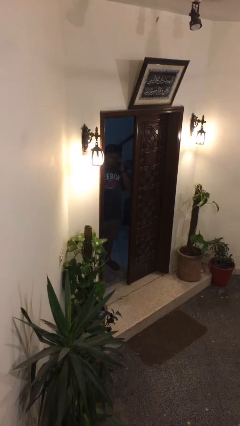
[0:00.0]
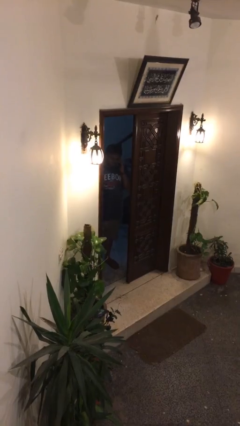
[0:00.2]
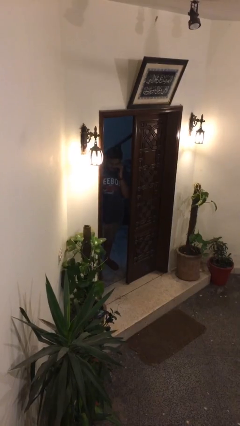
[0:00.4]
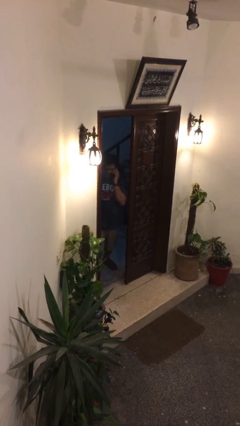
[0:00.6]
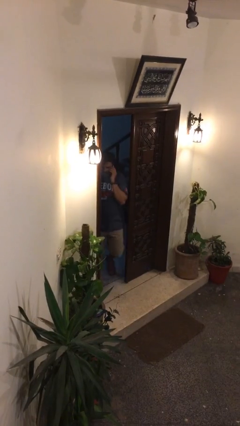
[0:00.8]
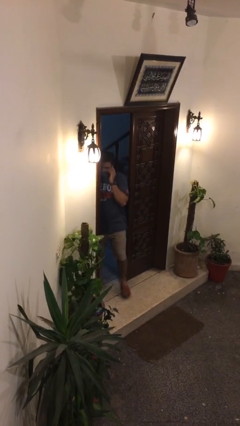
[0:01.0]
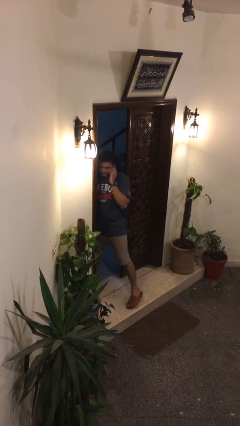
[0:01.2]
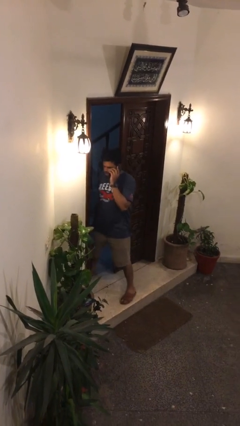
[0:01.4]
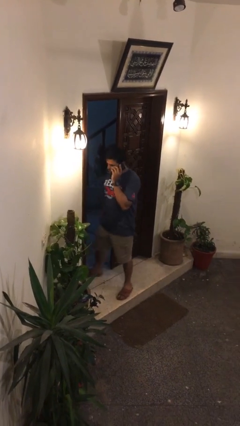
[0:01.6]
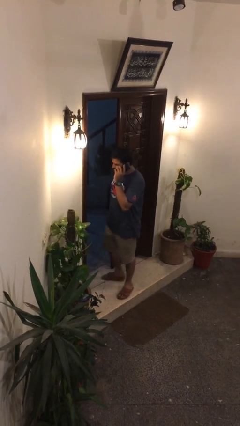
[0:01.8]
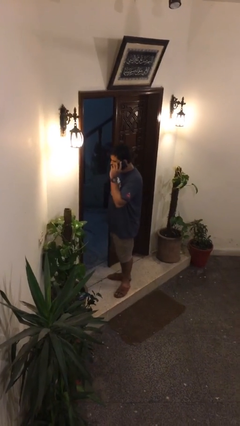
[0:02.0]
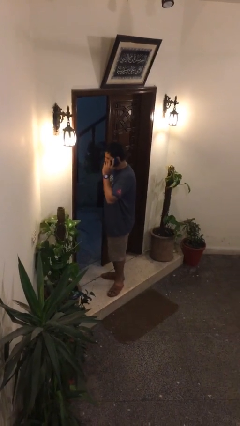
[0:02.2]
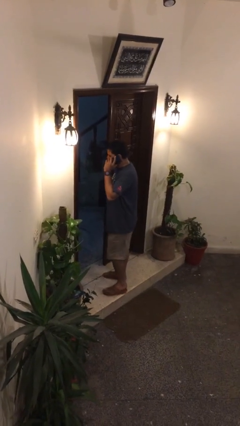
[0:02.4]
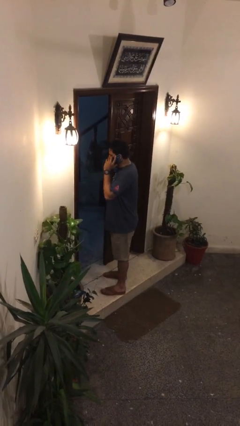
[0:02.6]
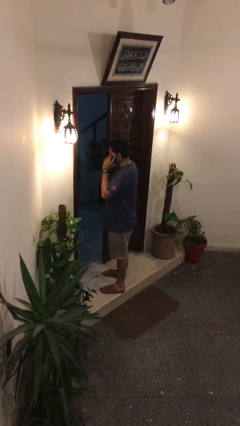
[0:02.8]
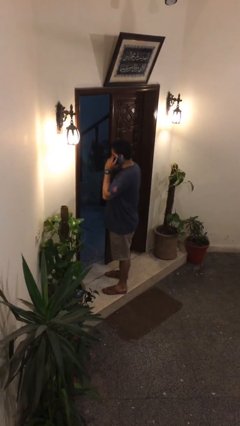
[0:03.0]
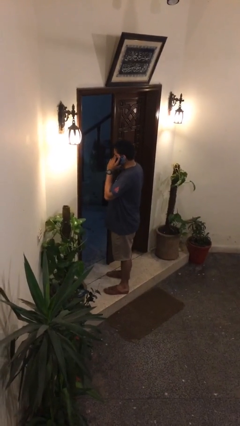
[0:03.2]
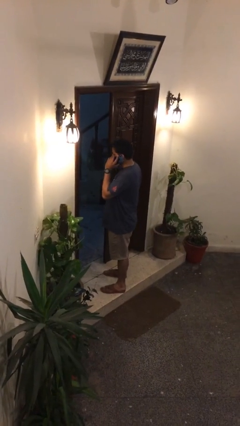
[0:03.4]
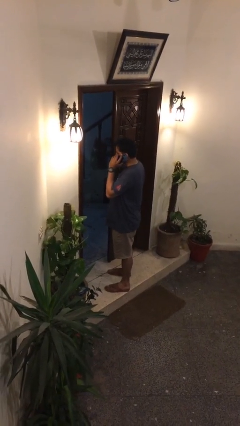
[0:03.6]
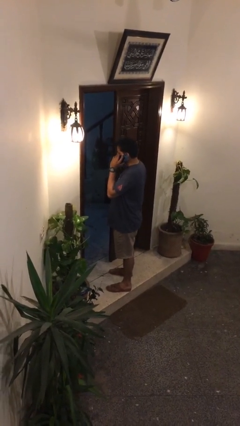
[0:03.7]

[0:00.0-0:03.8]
person enters scene through structure

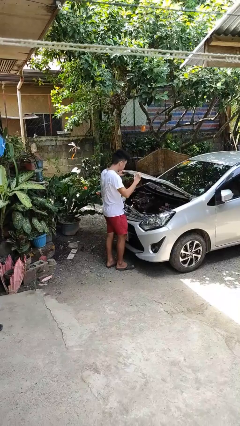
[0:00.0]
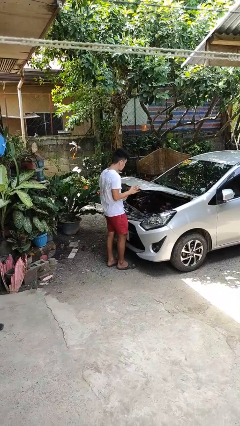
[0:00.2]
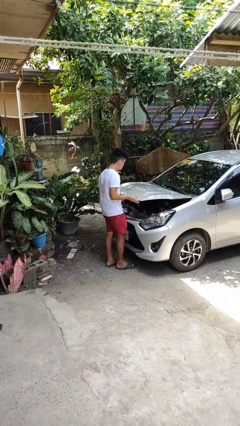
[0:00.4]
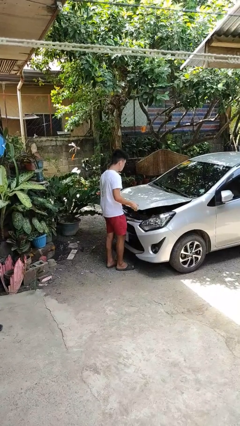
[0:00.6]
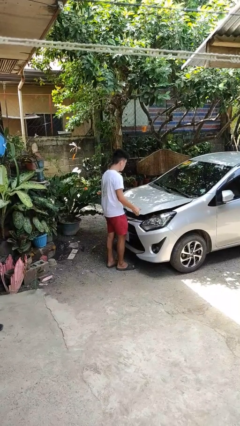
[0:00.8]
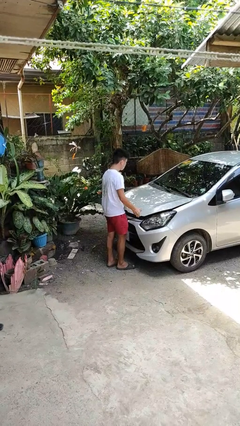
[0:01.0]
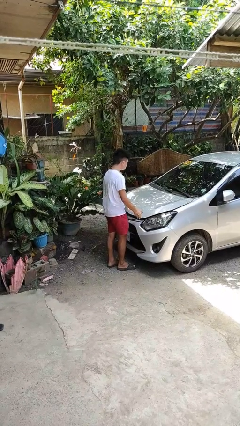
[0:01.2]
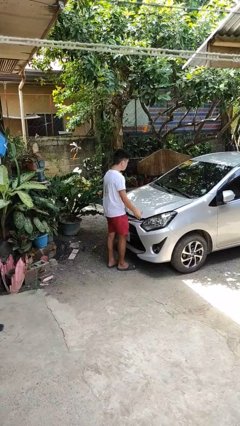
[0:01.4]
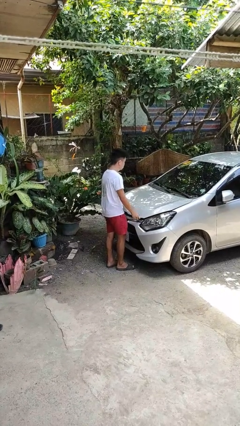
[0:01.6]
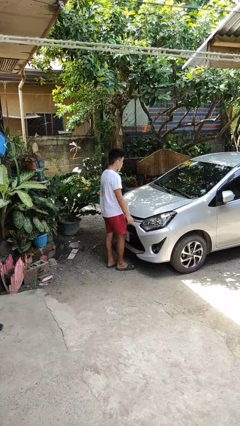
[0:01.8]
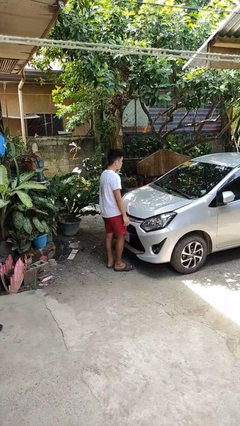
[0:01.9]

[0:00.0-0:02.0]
person closes car hood

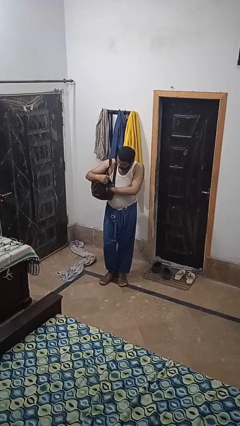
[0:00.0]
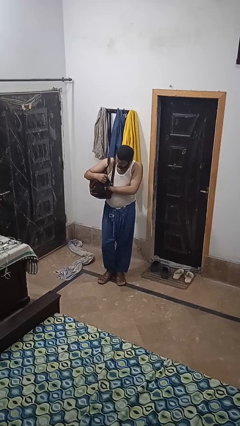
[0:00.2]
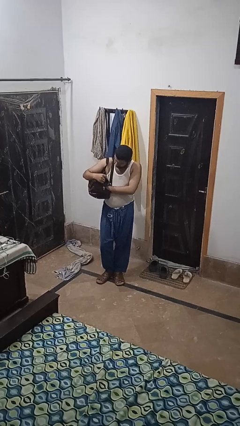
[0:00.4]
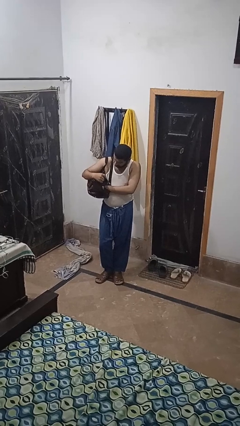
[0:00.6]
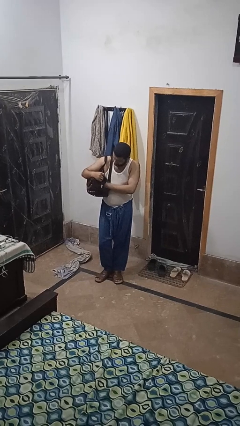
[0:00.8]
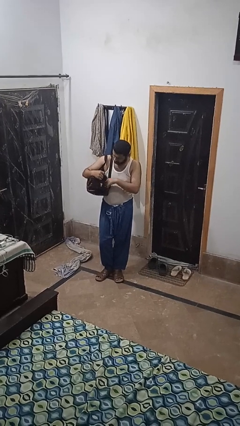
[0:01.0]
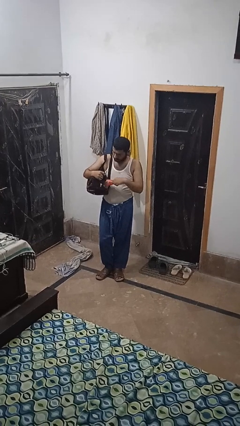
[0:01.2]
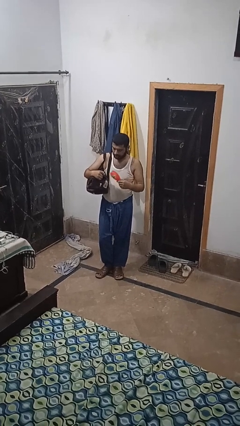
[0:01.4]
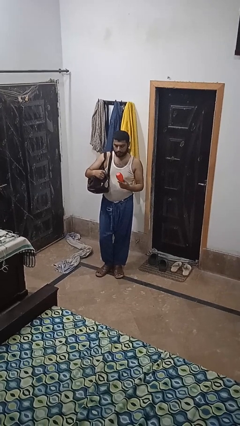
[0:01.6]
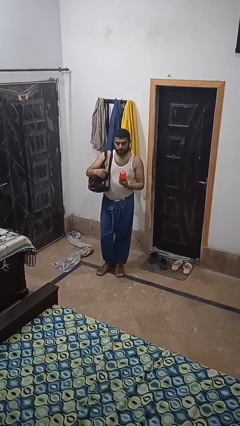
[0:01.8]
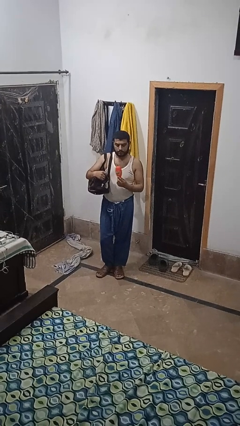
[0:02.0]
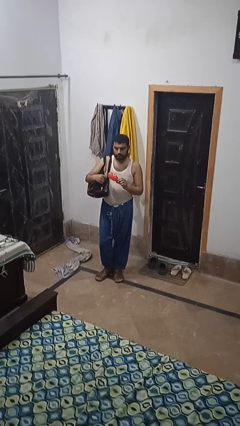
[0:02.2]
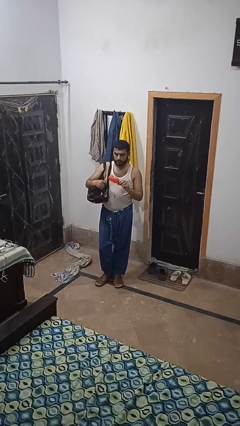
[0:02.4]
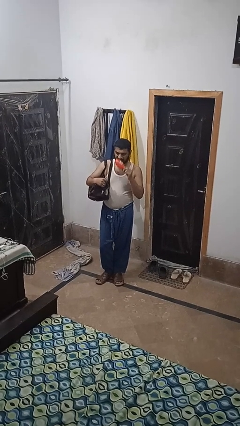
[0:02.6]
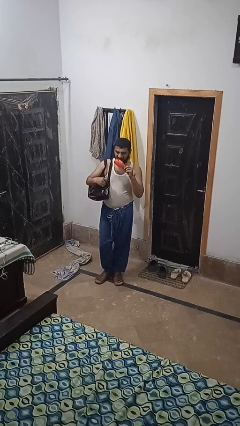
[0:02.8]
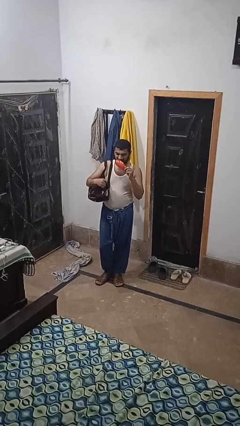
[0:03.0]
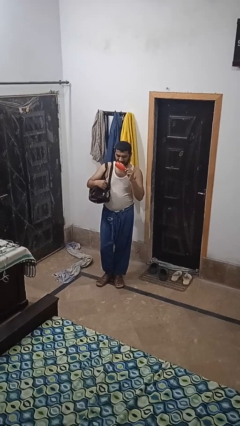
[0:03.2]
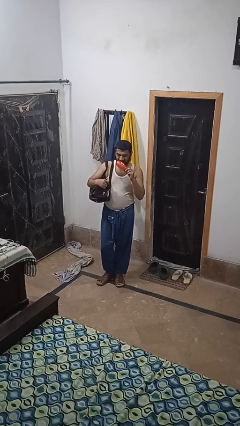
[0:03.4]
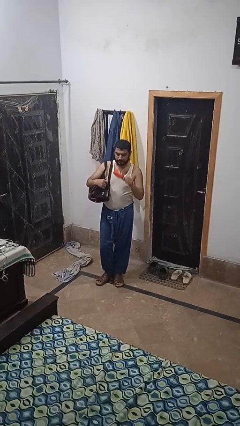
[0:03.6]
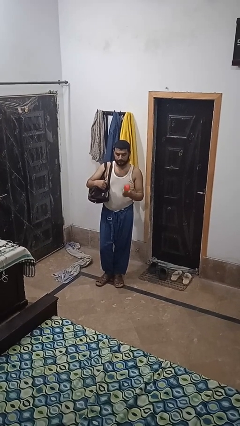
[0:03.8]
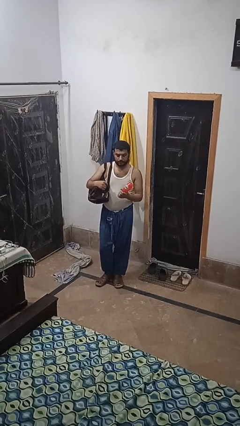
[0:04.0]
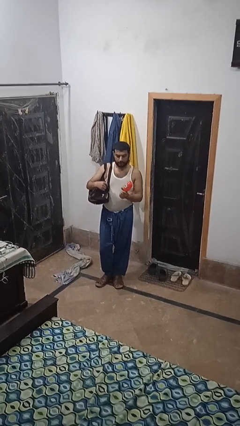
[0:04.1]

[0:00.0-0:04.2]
person takes object from purse

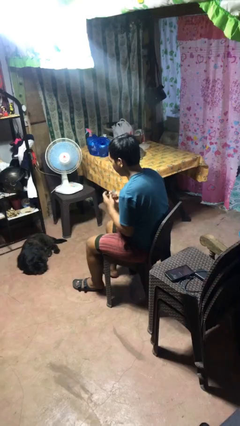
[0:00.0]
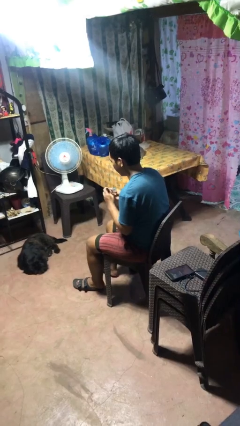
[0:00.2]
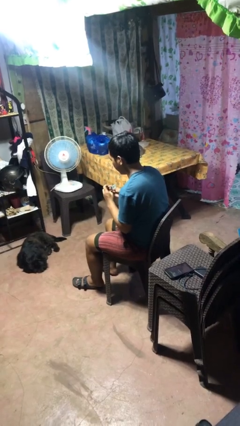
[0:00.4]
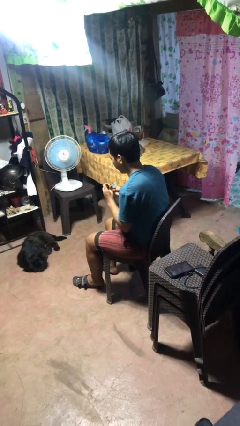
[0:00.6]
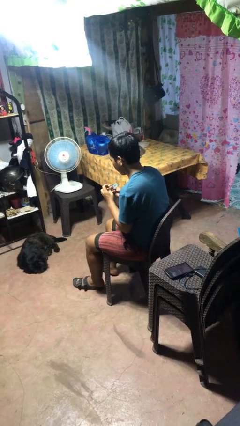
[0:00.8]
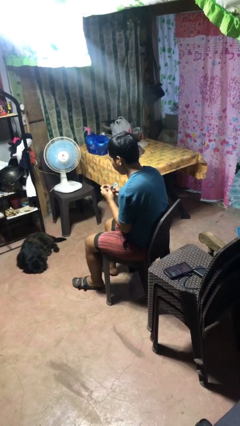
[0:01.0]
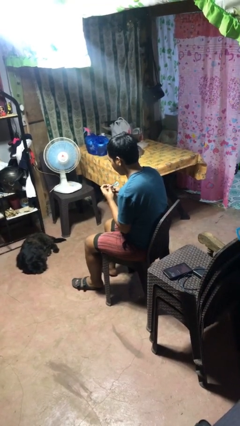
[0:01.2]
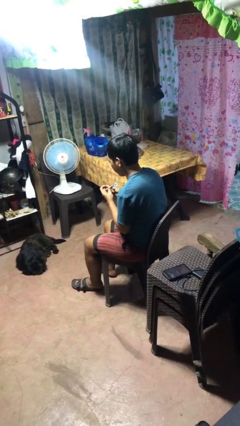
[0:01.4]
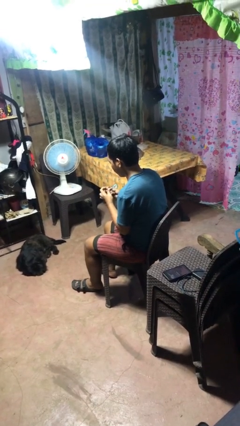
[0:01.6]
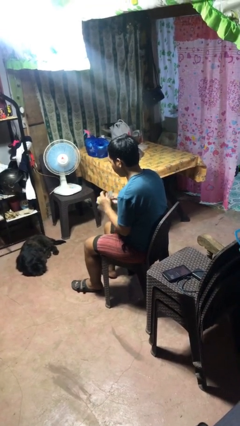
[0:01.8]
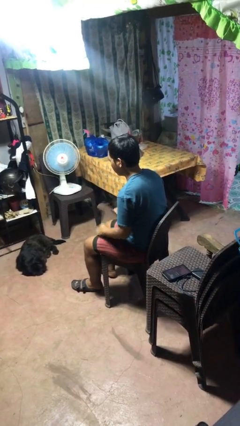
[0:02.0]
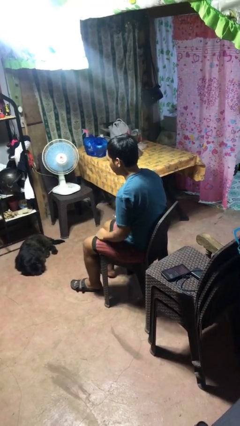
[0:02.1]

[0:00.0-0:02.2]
person files fingernails

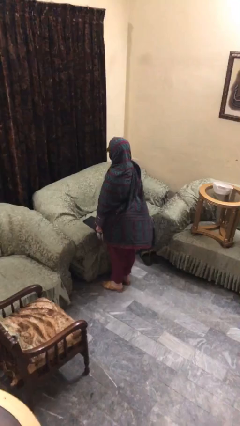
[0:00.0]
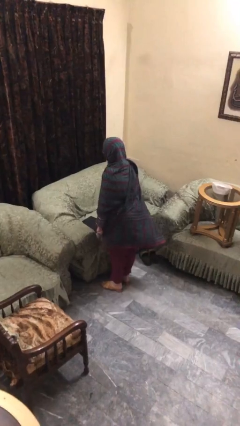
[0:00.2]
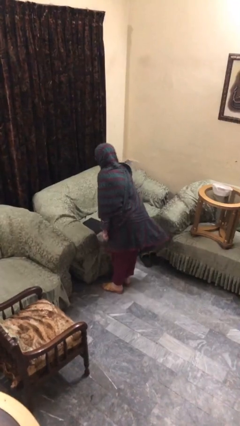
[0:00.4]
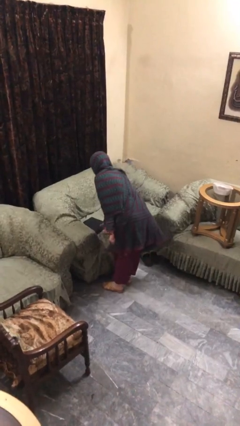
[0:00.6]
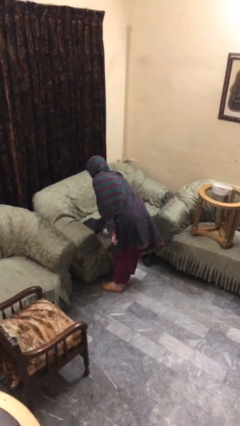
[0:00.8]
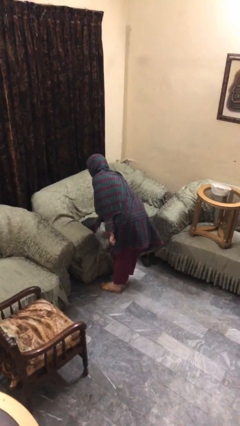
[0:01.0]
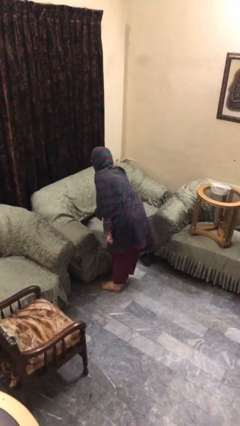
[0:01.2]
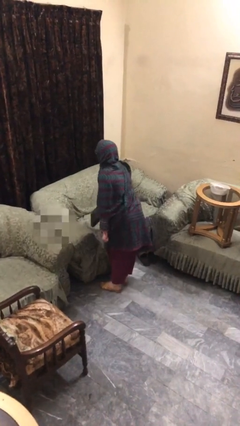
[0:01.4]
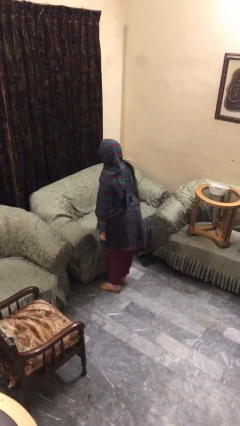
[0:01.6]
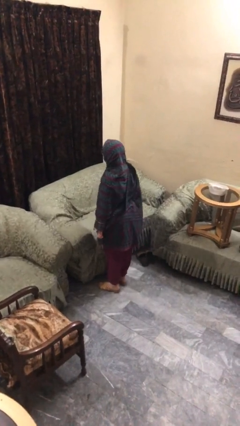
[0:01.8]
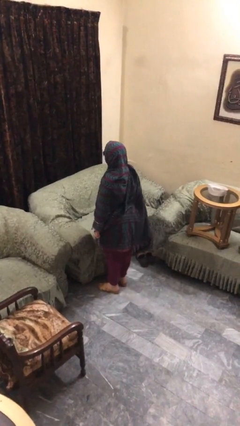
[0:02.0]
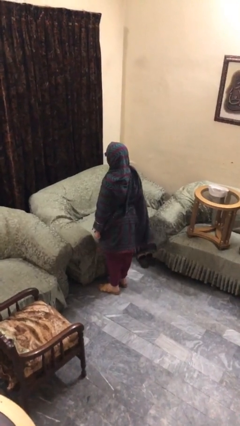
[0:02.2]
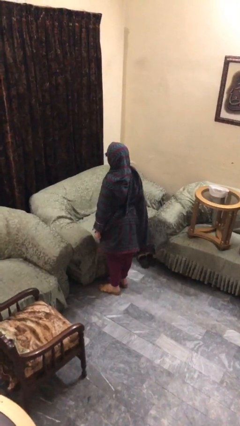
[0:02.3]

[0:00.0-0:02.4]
person picks up object from couch

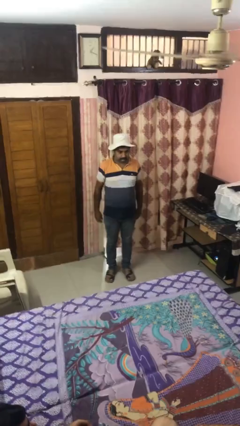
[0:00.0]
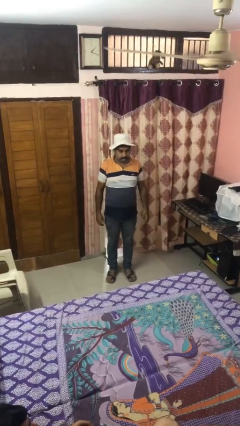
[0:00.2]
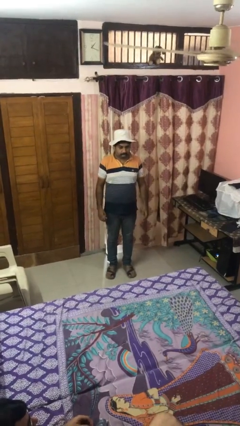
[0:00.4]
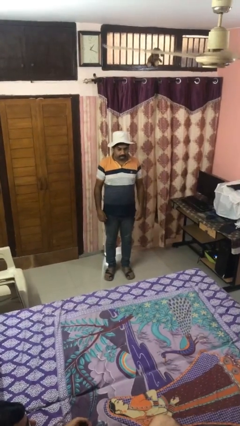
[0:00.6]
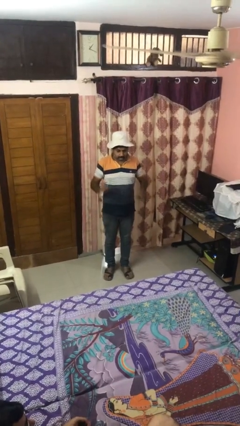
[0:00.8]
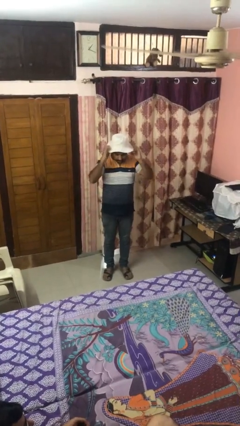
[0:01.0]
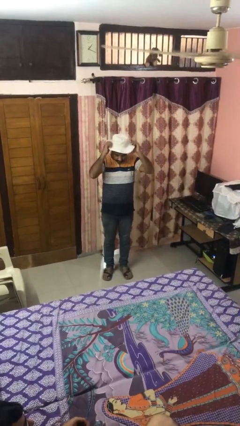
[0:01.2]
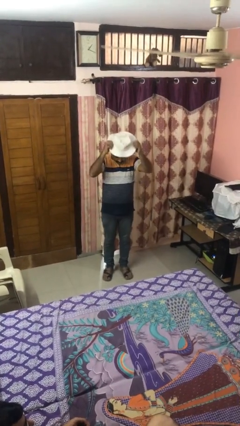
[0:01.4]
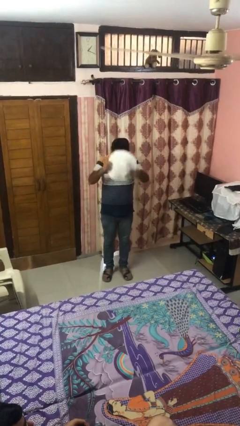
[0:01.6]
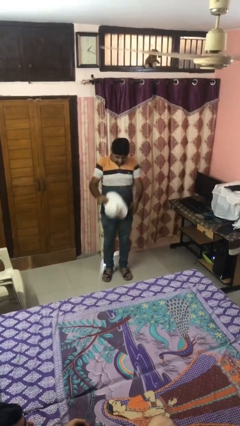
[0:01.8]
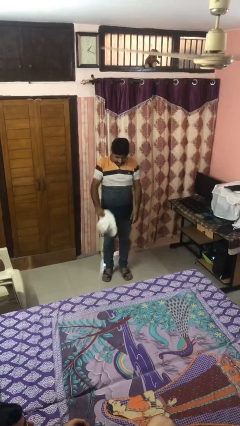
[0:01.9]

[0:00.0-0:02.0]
person takes off hat

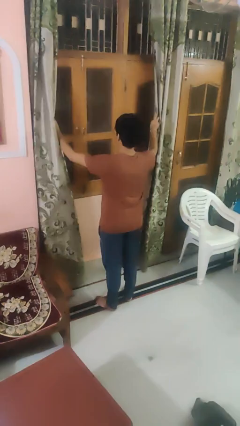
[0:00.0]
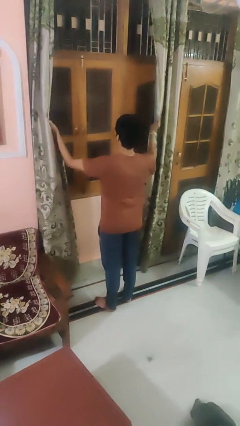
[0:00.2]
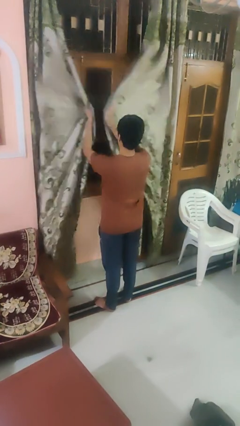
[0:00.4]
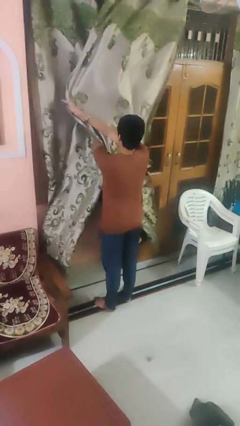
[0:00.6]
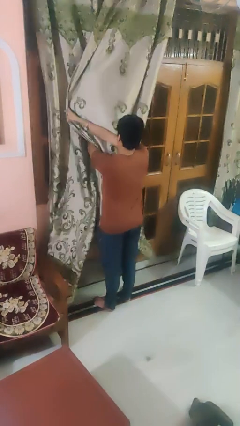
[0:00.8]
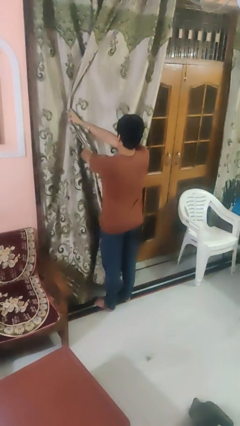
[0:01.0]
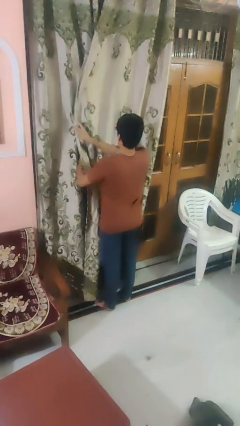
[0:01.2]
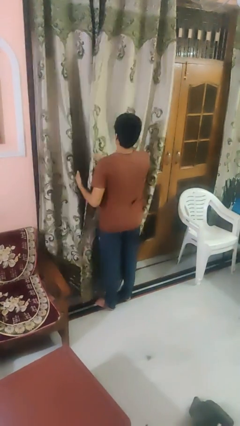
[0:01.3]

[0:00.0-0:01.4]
person closes curtains
